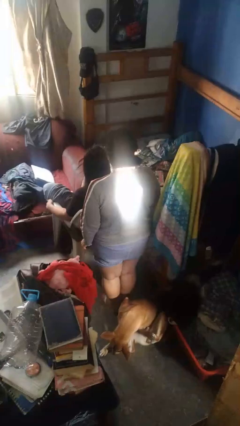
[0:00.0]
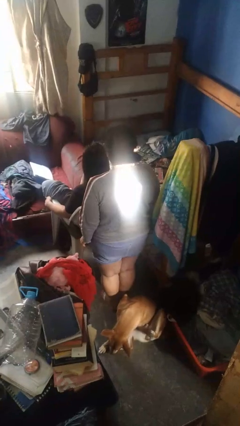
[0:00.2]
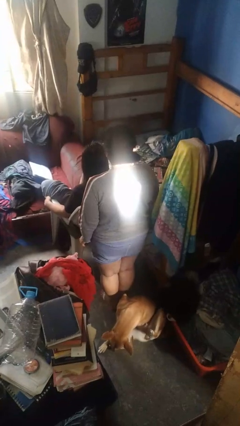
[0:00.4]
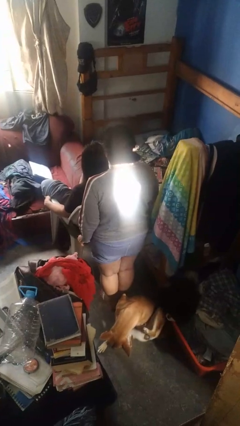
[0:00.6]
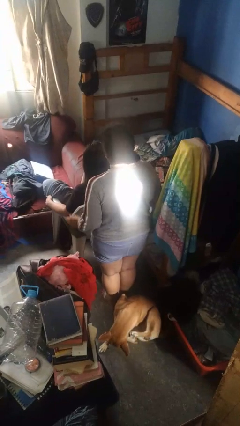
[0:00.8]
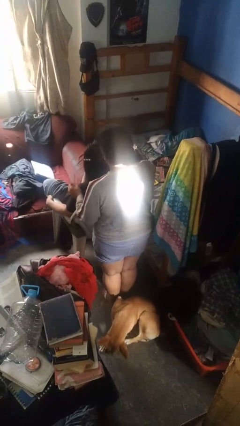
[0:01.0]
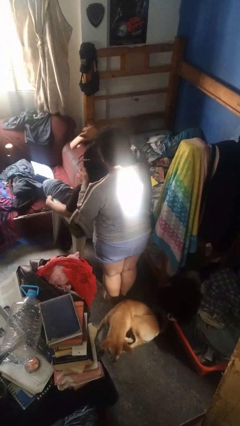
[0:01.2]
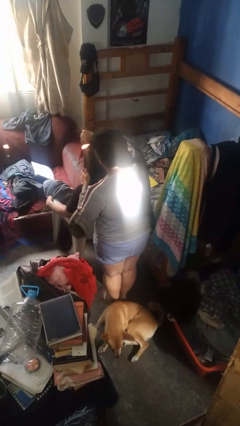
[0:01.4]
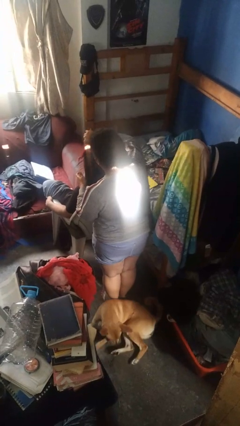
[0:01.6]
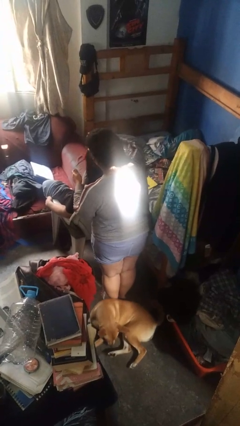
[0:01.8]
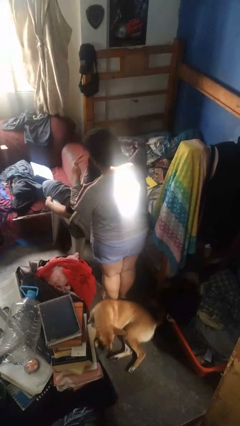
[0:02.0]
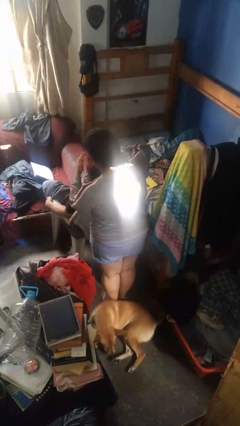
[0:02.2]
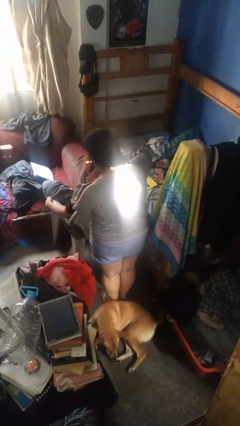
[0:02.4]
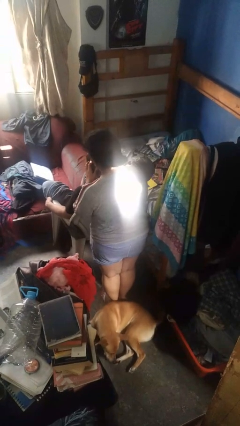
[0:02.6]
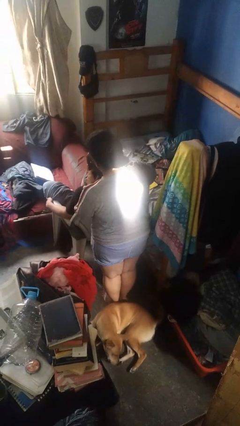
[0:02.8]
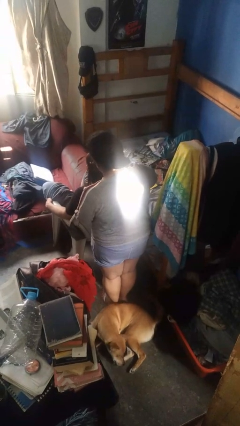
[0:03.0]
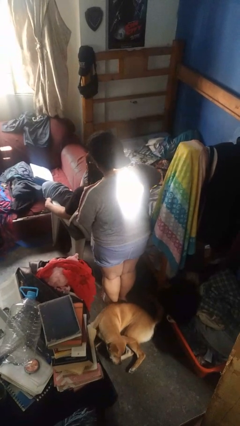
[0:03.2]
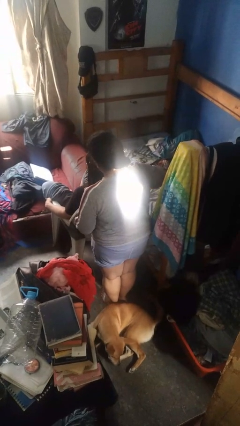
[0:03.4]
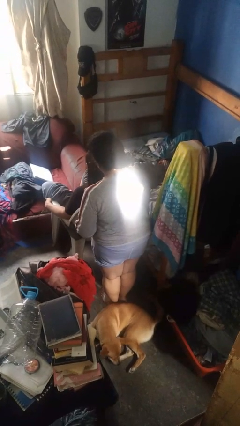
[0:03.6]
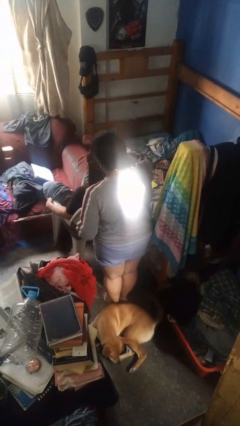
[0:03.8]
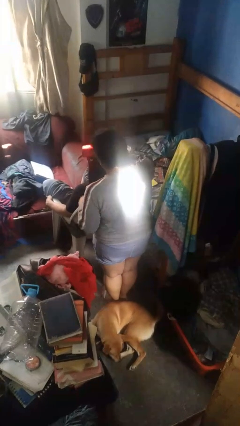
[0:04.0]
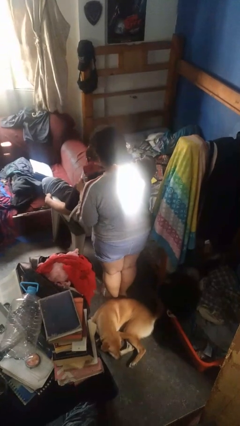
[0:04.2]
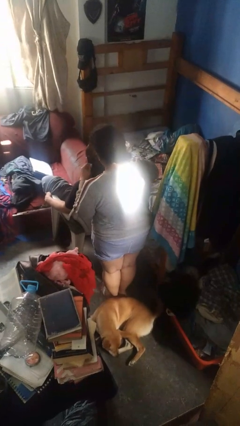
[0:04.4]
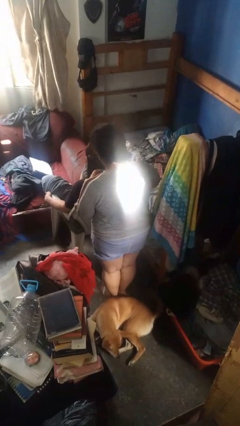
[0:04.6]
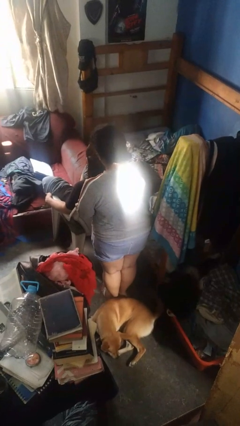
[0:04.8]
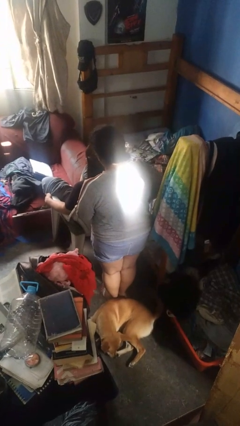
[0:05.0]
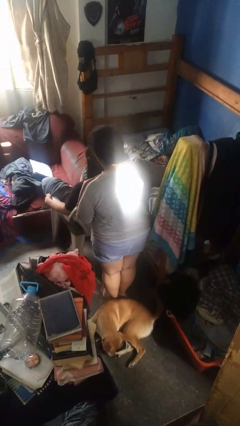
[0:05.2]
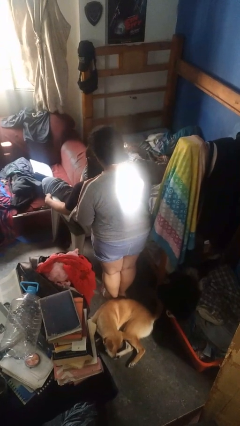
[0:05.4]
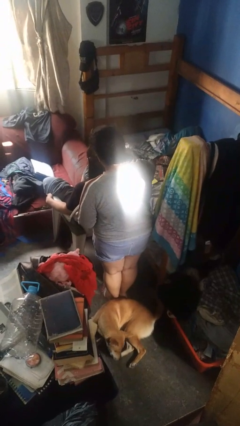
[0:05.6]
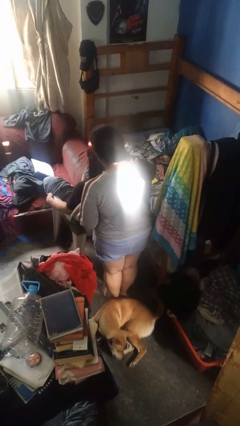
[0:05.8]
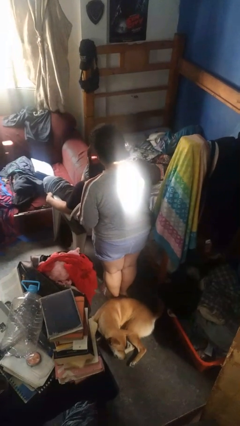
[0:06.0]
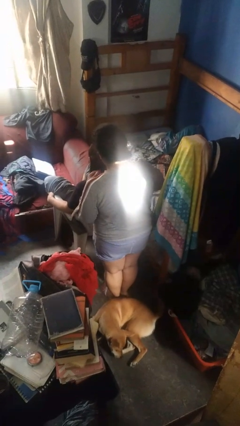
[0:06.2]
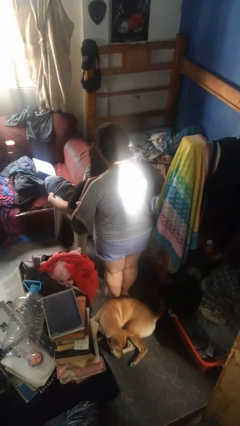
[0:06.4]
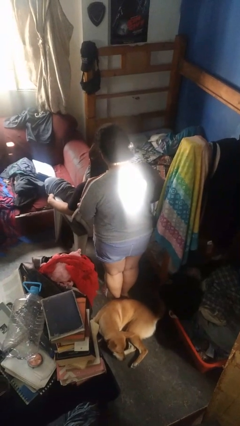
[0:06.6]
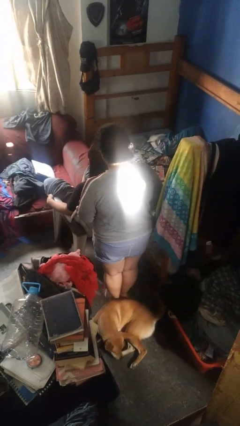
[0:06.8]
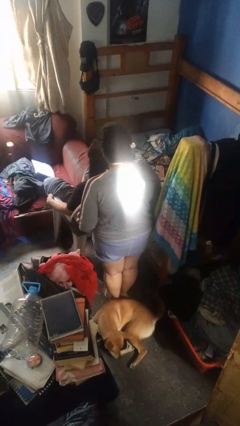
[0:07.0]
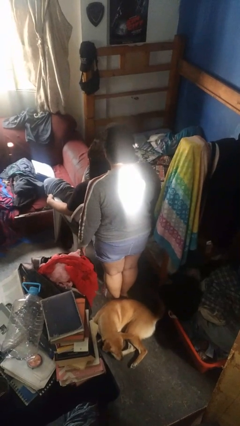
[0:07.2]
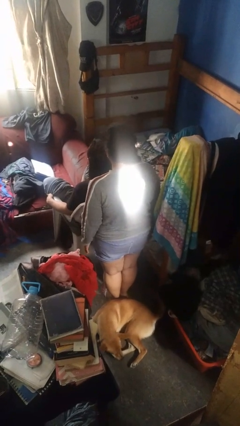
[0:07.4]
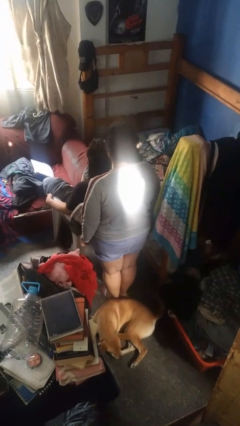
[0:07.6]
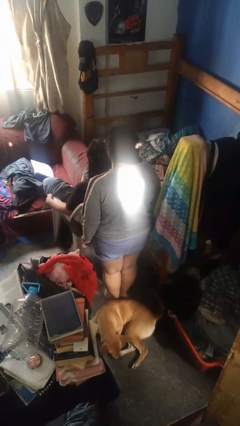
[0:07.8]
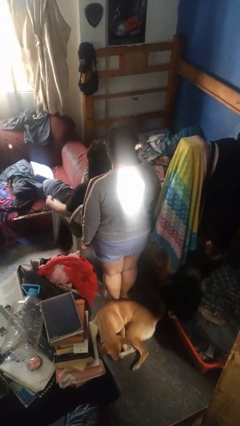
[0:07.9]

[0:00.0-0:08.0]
person brushes hair of person

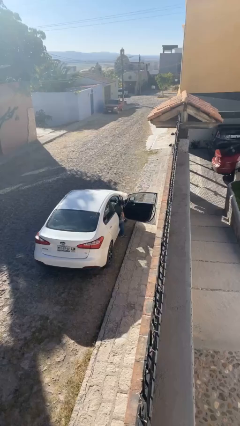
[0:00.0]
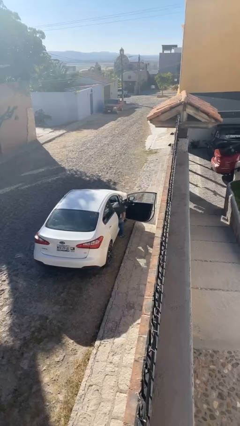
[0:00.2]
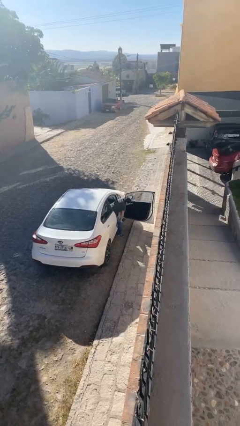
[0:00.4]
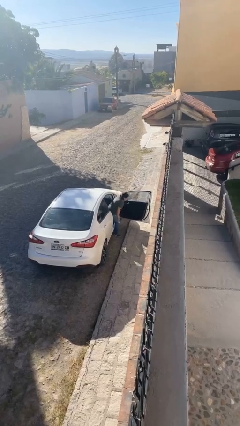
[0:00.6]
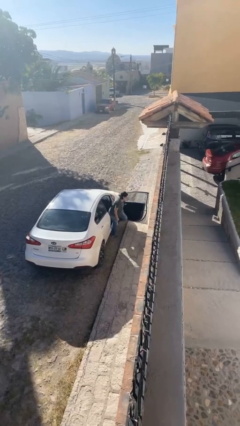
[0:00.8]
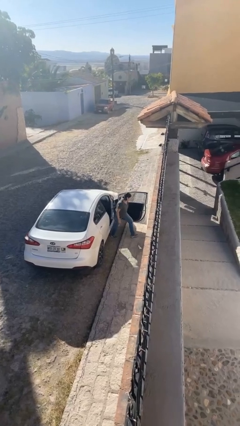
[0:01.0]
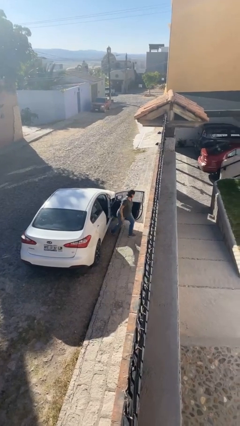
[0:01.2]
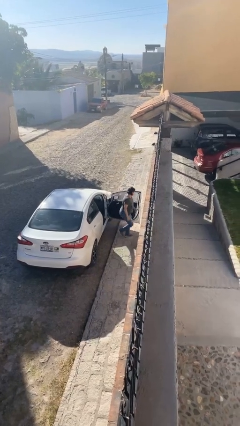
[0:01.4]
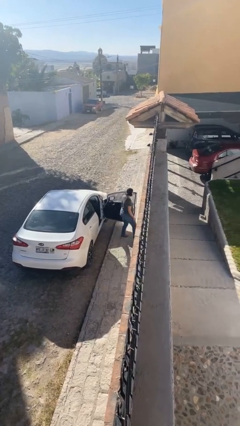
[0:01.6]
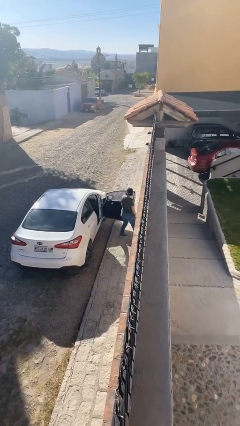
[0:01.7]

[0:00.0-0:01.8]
person exits car

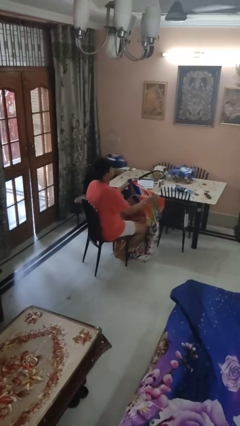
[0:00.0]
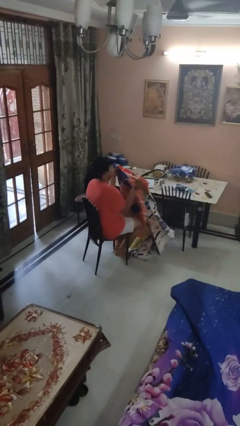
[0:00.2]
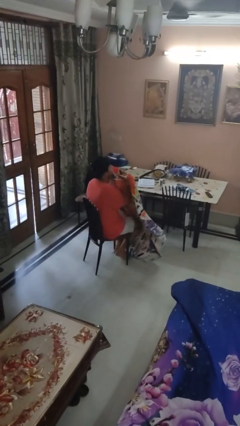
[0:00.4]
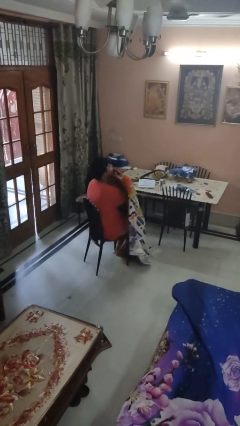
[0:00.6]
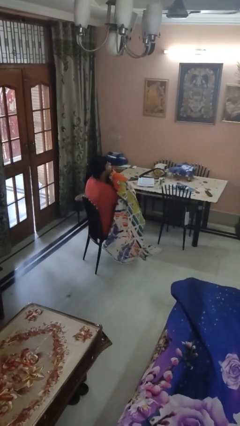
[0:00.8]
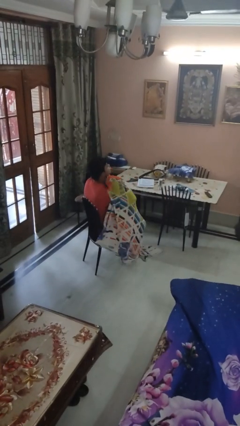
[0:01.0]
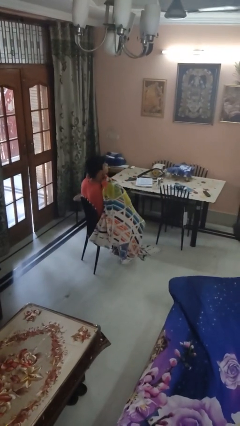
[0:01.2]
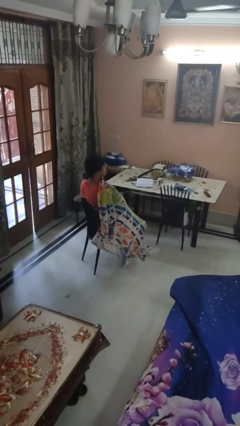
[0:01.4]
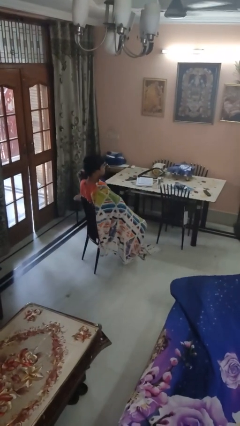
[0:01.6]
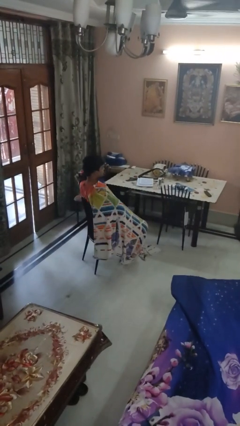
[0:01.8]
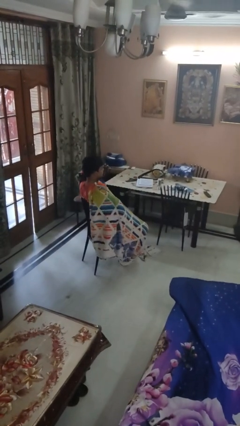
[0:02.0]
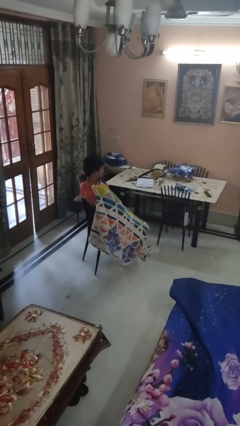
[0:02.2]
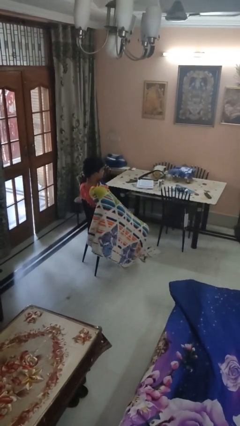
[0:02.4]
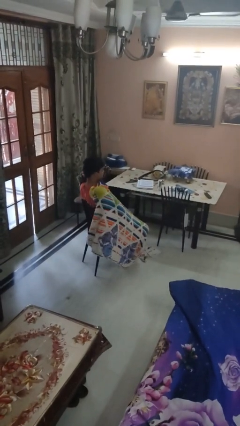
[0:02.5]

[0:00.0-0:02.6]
person covers with blanket

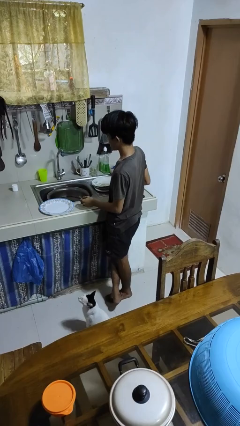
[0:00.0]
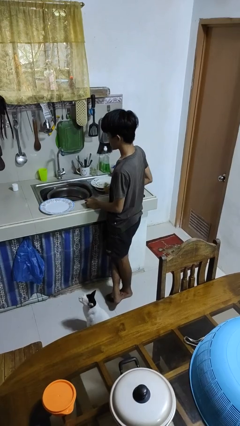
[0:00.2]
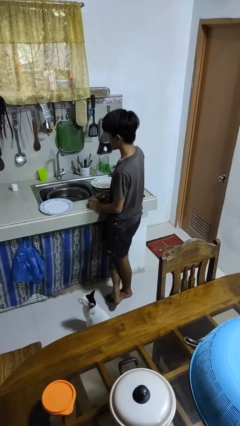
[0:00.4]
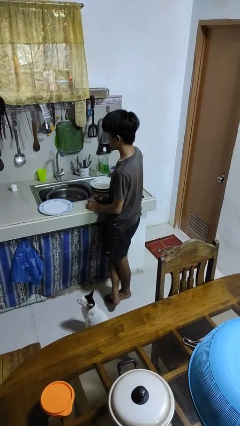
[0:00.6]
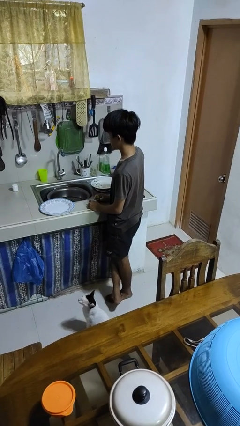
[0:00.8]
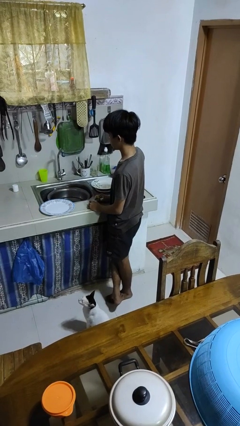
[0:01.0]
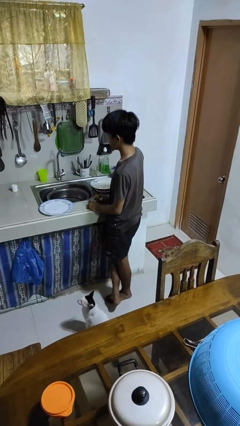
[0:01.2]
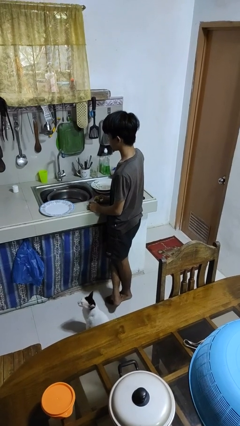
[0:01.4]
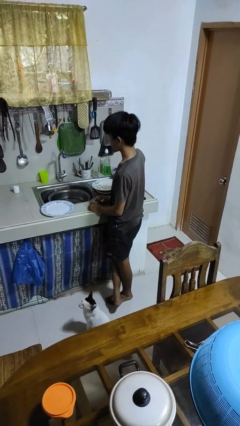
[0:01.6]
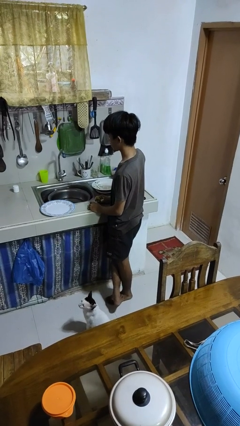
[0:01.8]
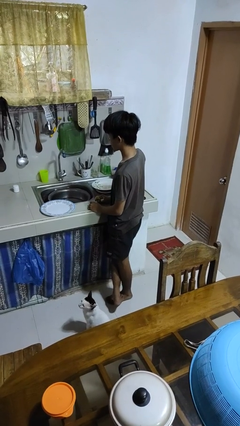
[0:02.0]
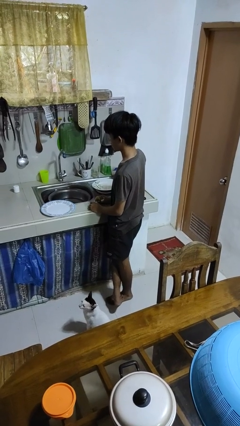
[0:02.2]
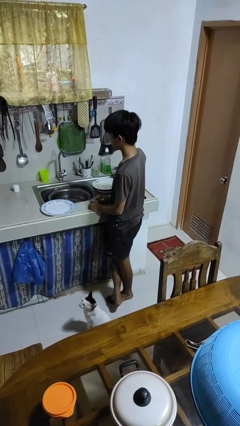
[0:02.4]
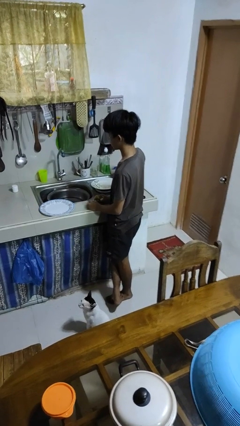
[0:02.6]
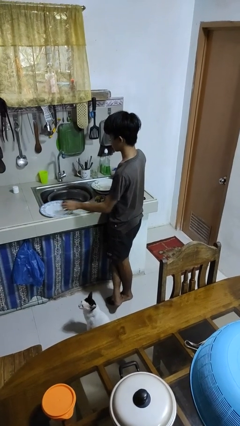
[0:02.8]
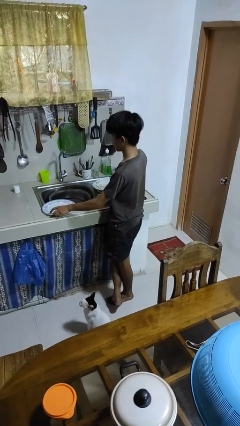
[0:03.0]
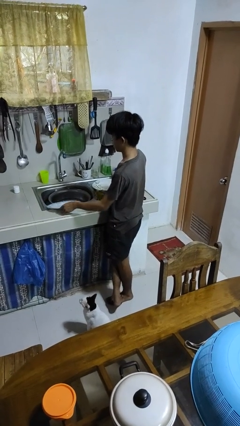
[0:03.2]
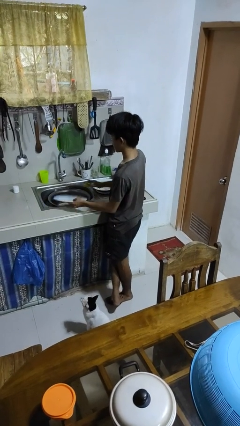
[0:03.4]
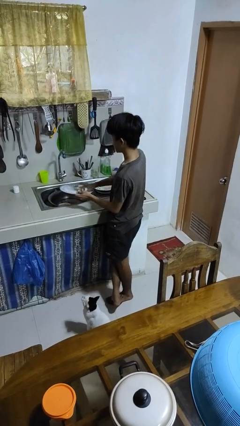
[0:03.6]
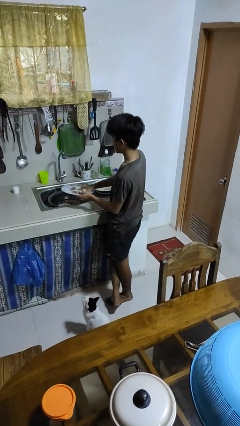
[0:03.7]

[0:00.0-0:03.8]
person washes hands

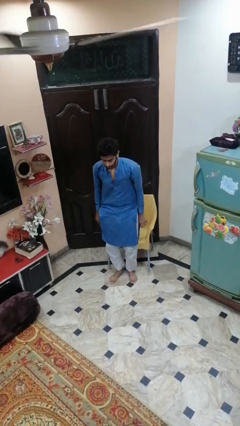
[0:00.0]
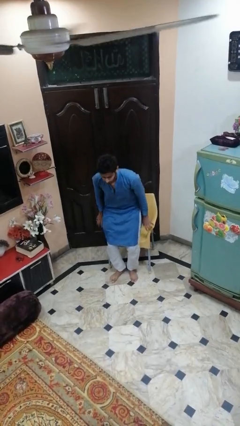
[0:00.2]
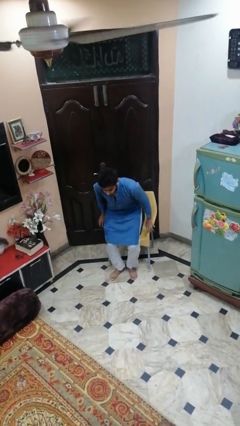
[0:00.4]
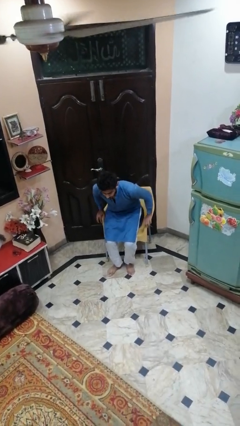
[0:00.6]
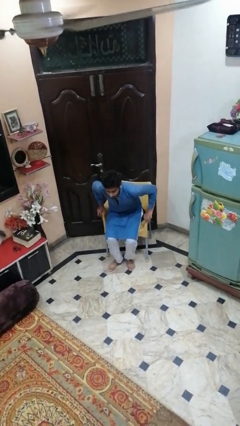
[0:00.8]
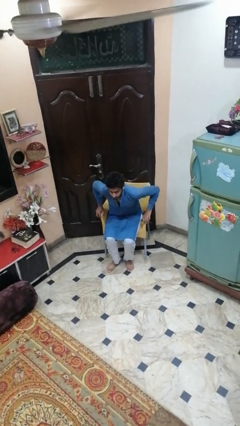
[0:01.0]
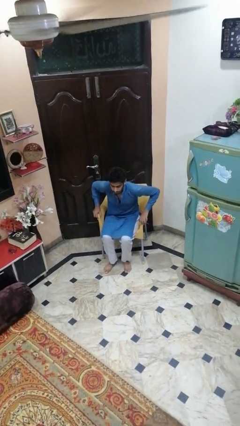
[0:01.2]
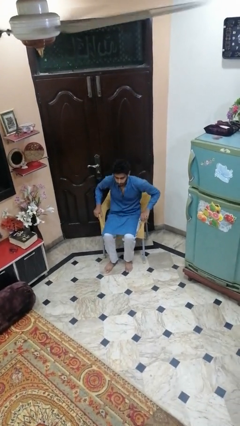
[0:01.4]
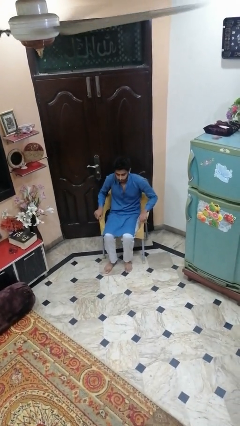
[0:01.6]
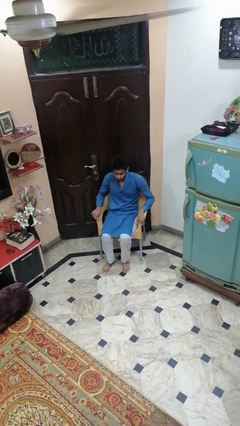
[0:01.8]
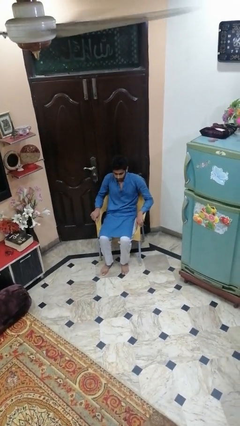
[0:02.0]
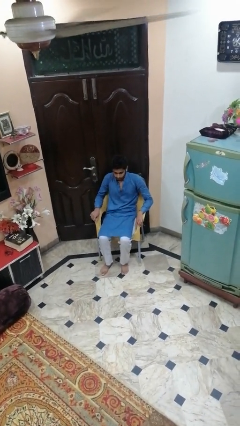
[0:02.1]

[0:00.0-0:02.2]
person sits down
